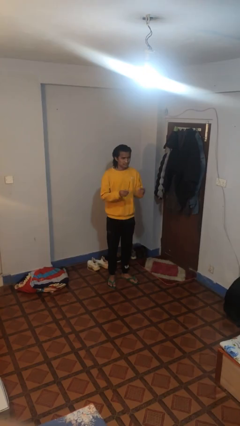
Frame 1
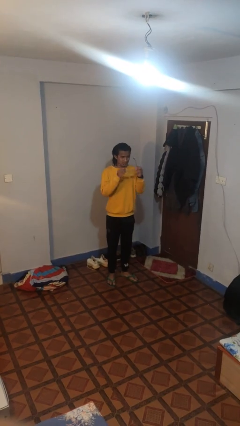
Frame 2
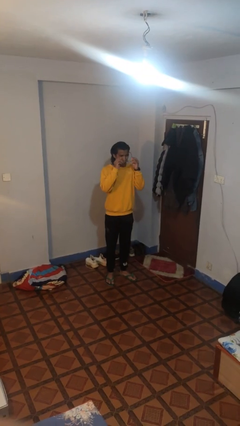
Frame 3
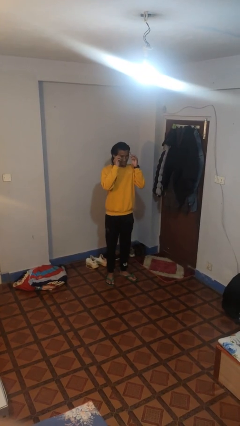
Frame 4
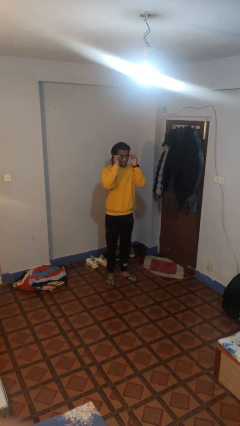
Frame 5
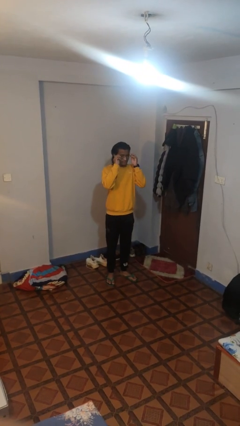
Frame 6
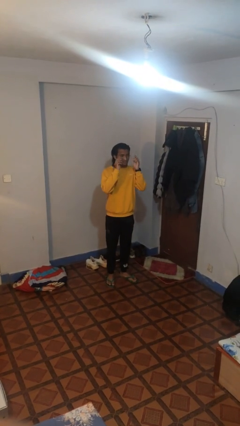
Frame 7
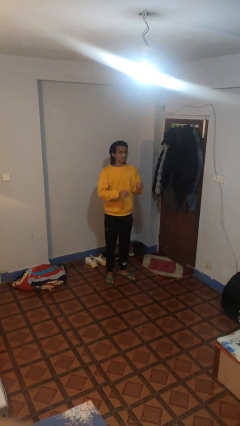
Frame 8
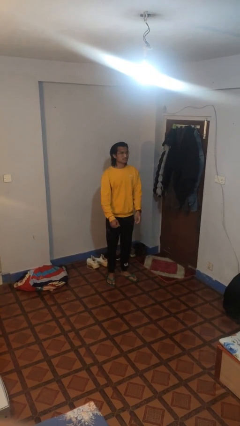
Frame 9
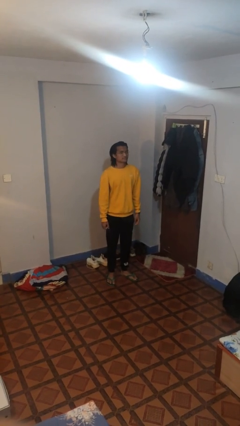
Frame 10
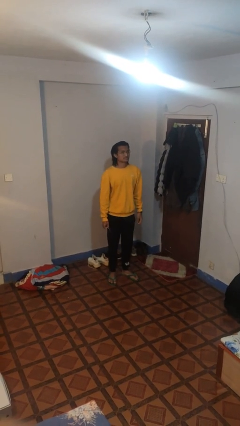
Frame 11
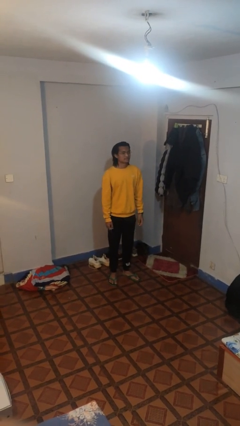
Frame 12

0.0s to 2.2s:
person puts on glasses

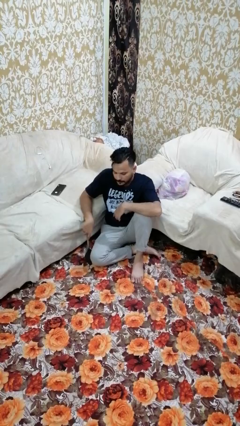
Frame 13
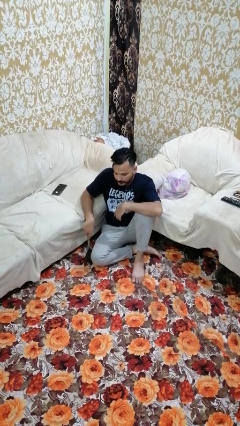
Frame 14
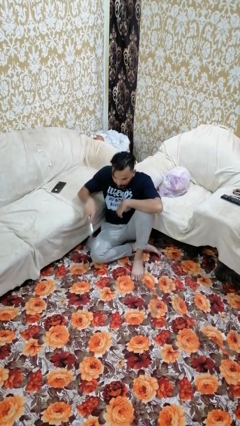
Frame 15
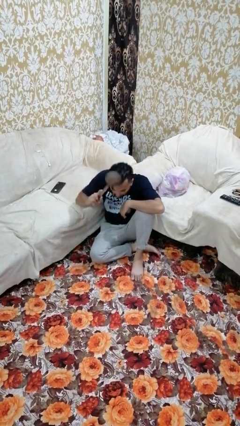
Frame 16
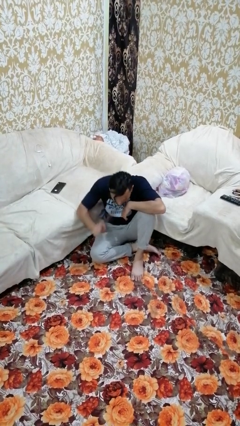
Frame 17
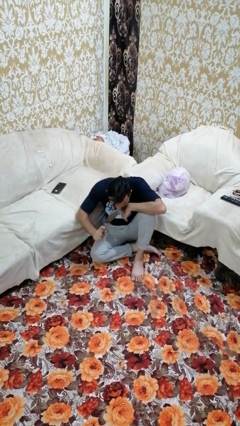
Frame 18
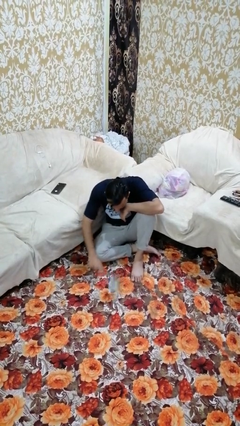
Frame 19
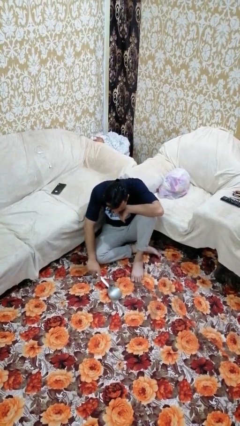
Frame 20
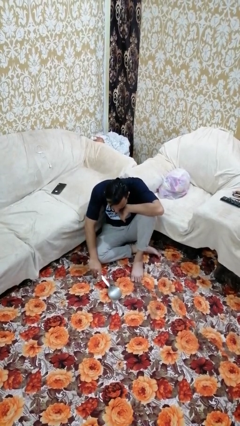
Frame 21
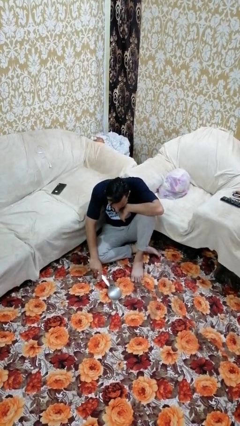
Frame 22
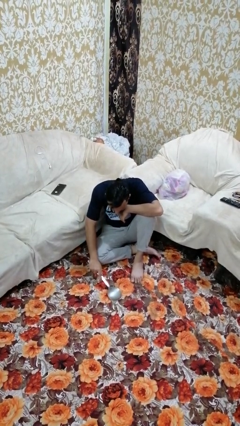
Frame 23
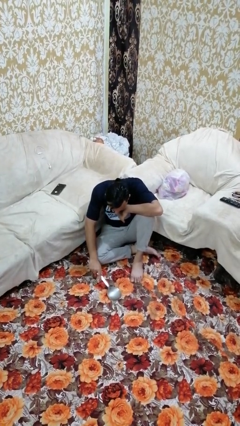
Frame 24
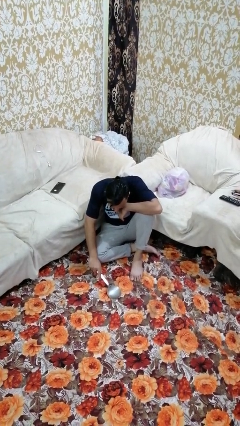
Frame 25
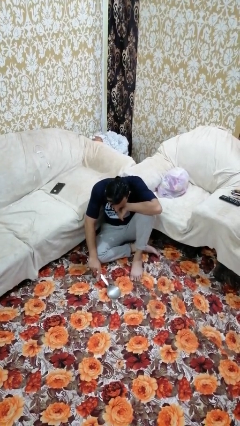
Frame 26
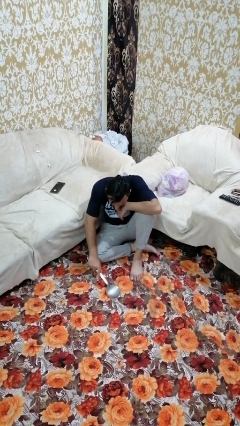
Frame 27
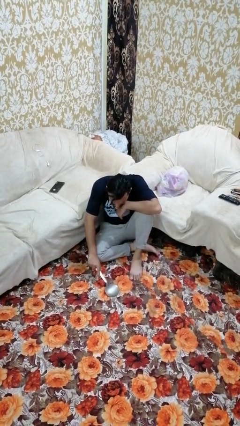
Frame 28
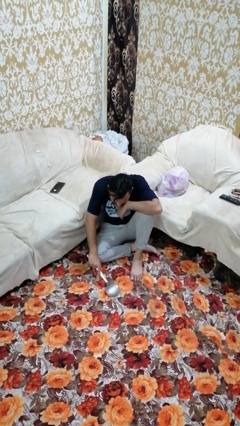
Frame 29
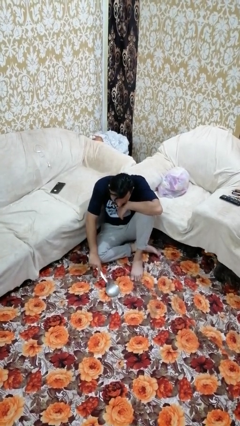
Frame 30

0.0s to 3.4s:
person swats bug

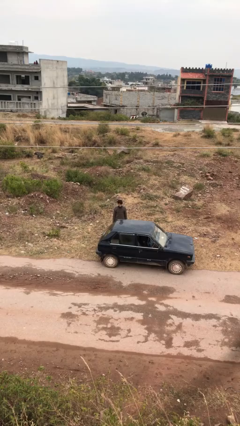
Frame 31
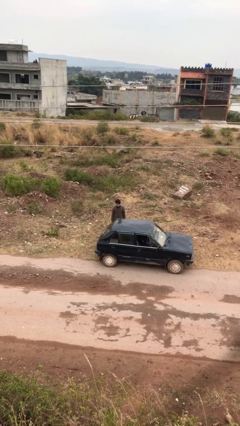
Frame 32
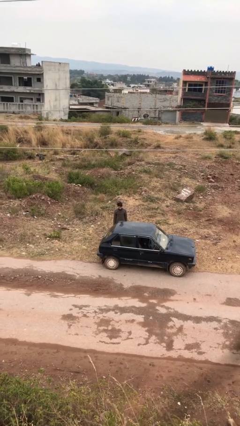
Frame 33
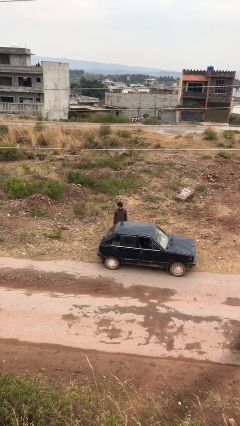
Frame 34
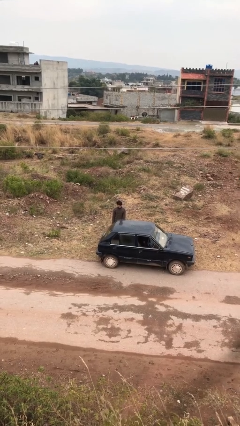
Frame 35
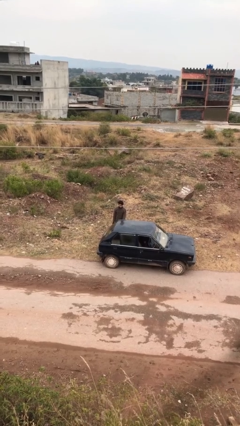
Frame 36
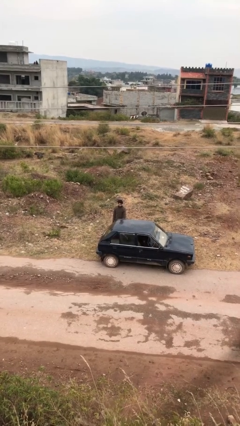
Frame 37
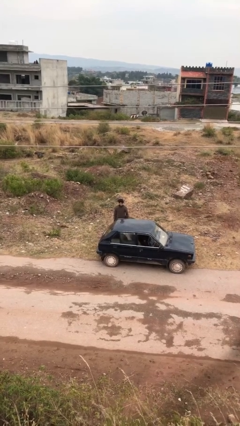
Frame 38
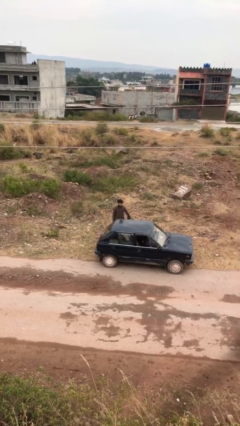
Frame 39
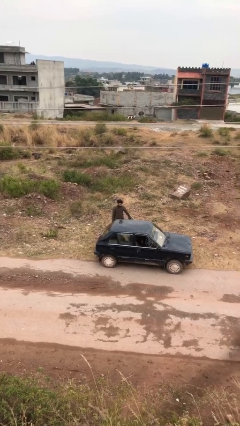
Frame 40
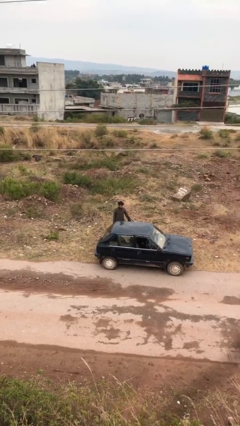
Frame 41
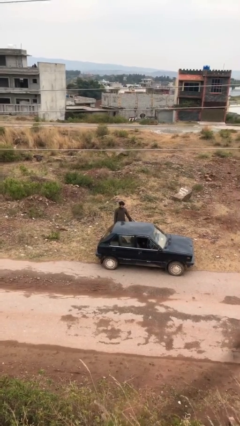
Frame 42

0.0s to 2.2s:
person opens car door

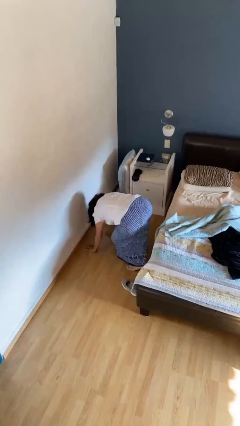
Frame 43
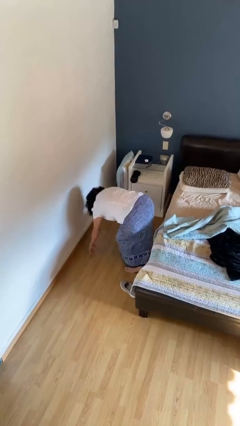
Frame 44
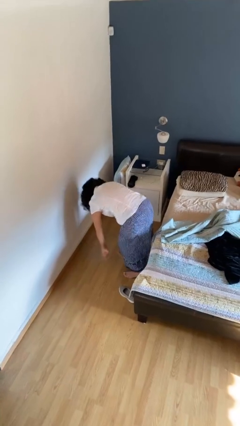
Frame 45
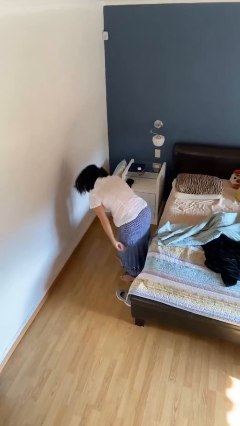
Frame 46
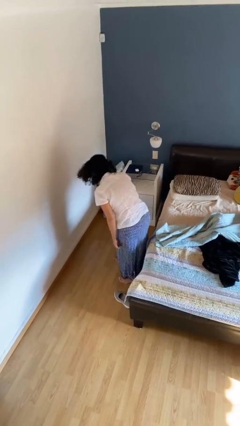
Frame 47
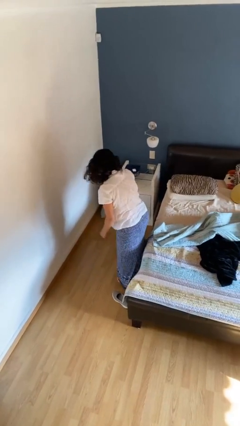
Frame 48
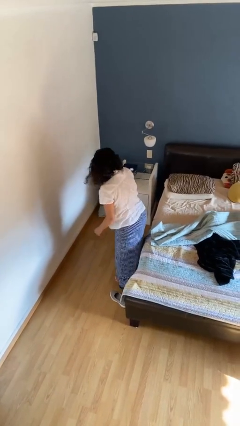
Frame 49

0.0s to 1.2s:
person stands up from floor

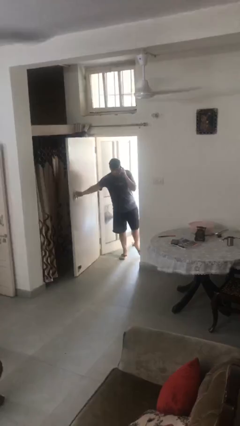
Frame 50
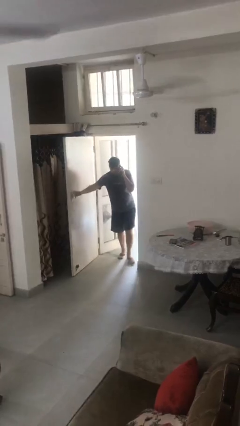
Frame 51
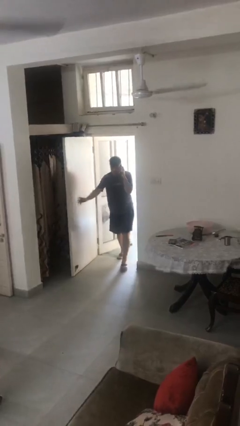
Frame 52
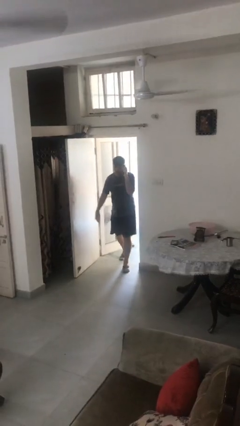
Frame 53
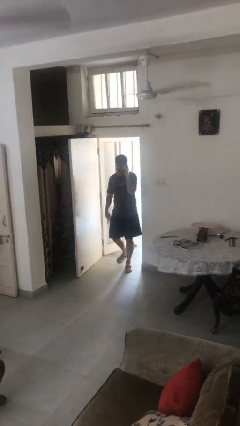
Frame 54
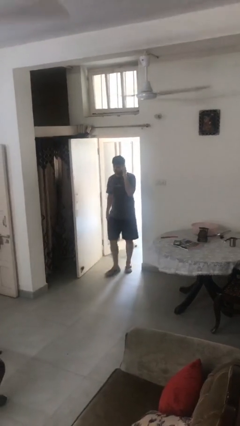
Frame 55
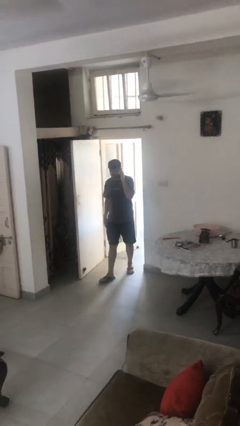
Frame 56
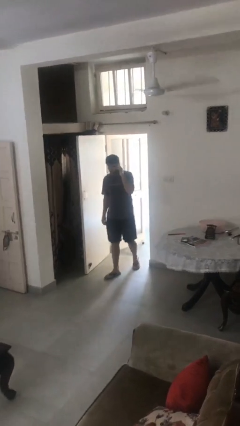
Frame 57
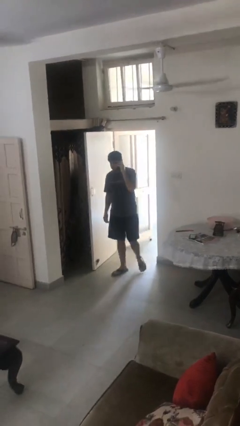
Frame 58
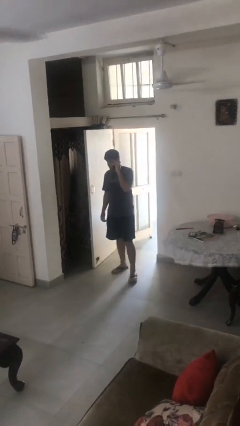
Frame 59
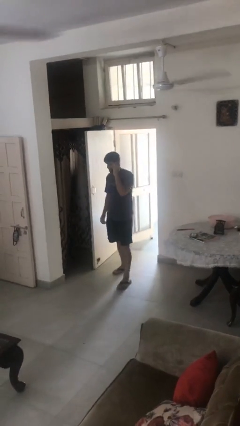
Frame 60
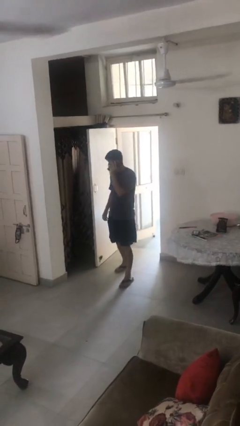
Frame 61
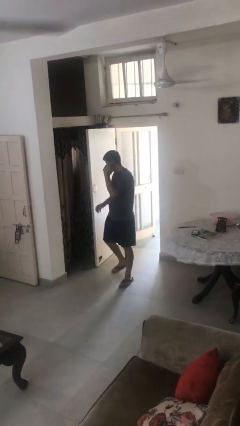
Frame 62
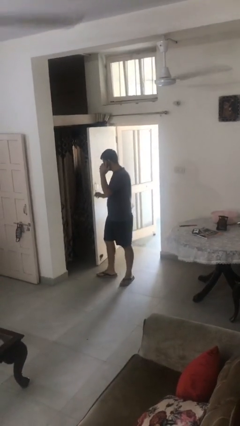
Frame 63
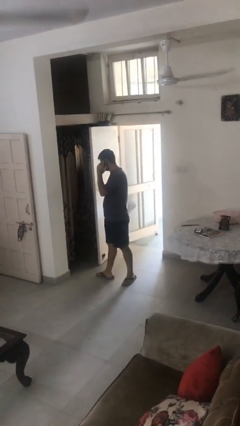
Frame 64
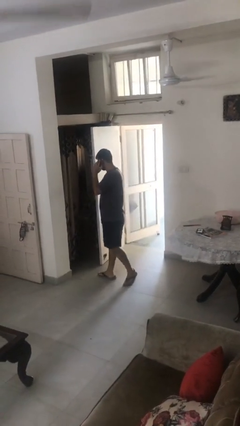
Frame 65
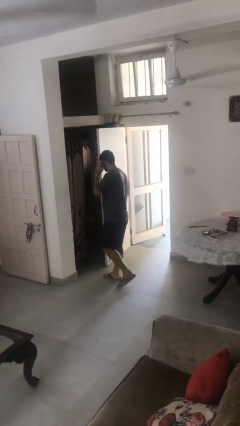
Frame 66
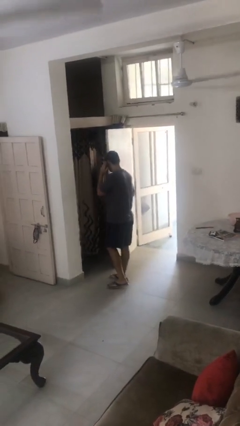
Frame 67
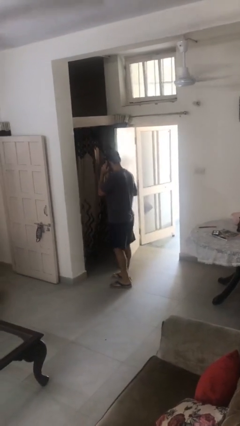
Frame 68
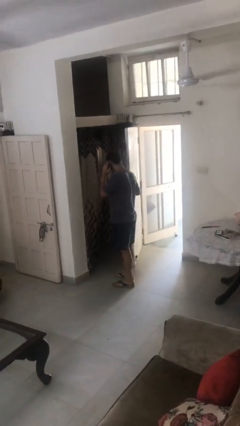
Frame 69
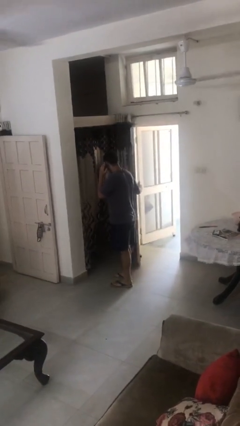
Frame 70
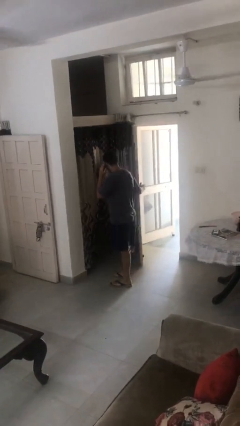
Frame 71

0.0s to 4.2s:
person enters scene through structure

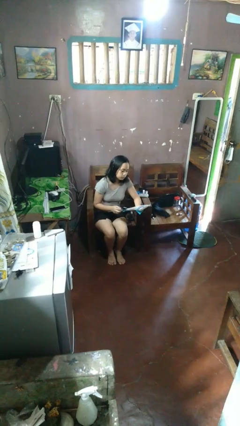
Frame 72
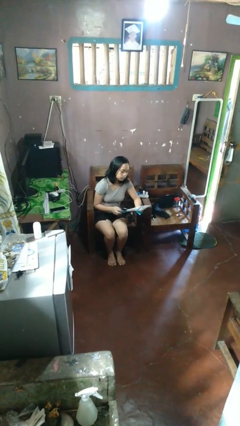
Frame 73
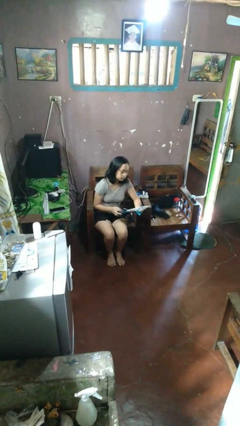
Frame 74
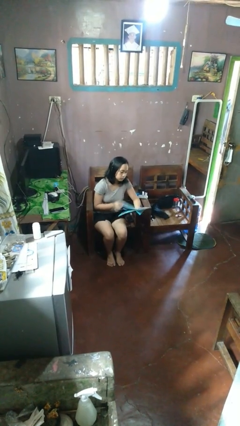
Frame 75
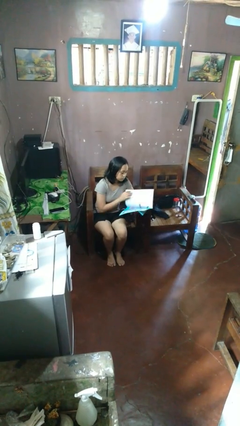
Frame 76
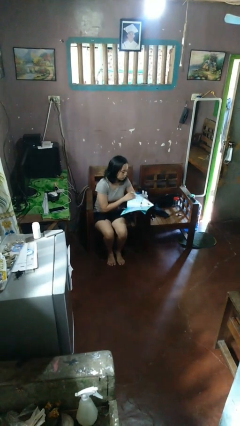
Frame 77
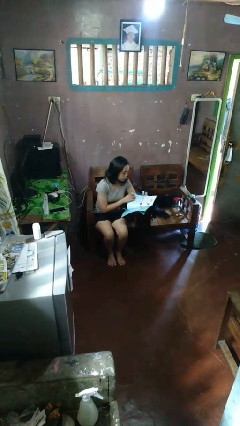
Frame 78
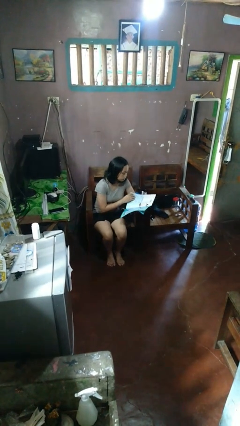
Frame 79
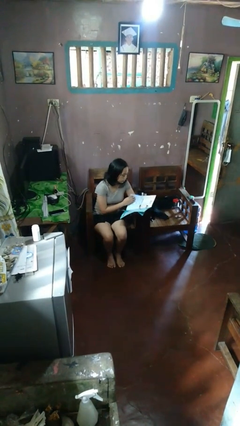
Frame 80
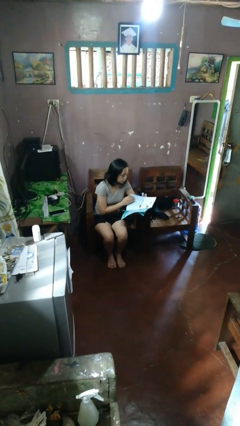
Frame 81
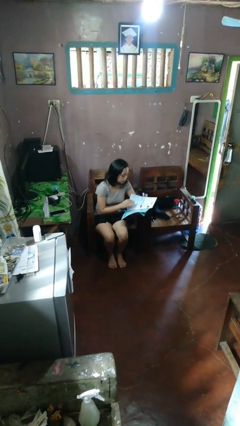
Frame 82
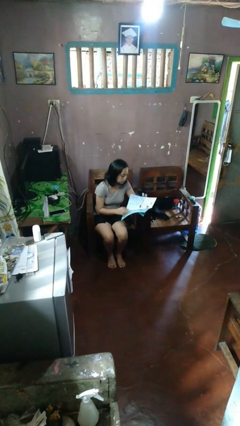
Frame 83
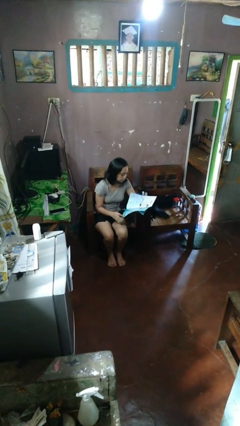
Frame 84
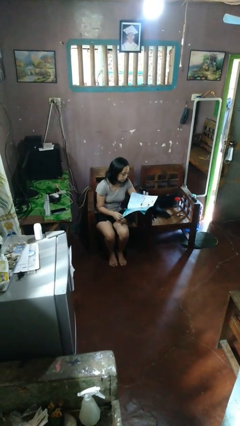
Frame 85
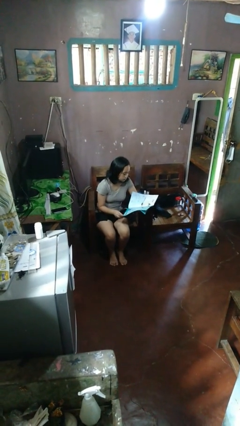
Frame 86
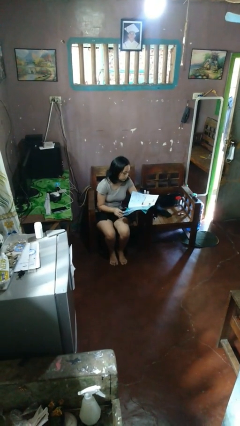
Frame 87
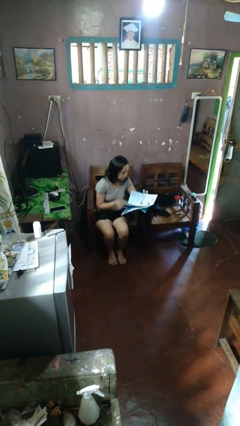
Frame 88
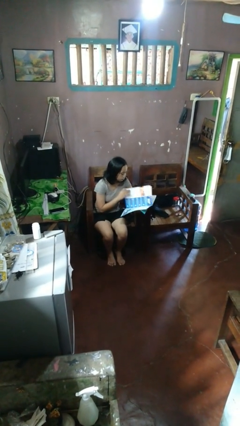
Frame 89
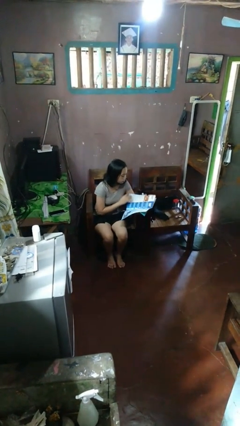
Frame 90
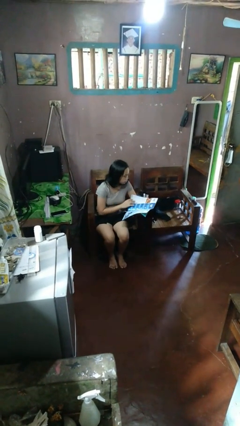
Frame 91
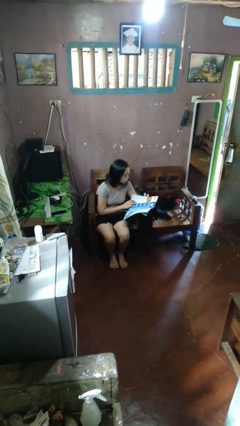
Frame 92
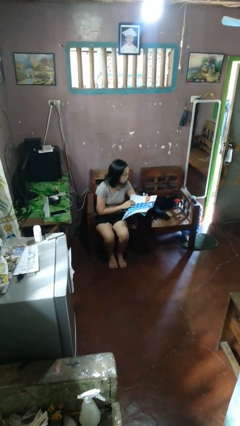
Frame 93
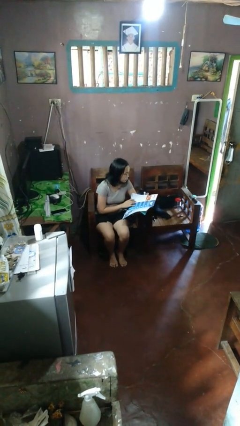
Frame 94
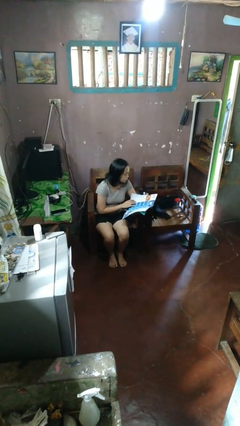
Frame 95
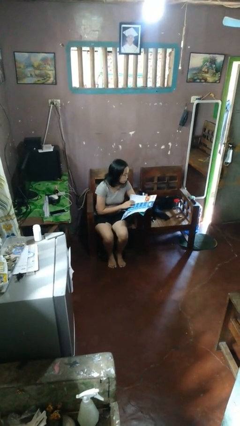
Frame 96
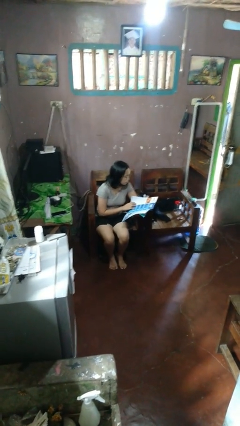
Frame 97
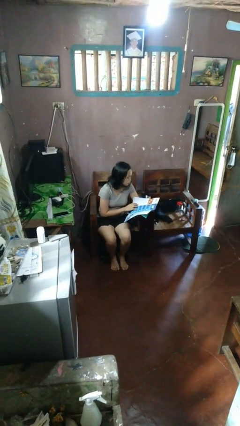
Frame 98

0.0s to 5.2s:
person reads magazine
